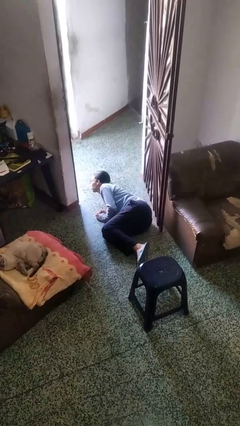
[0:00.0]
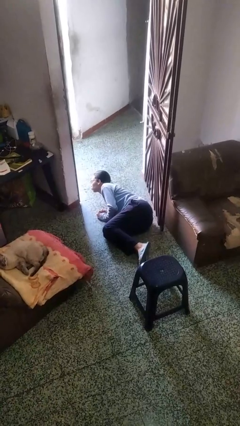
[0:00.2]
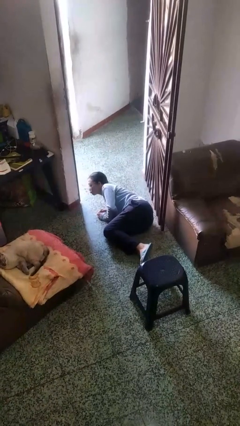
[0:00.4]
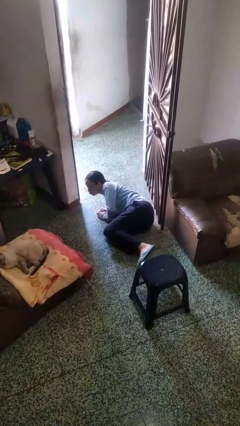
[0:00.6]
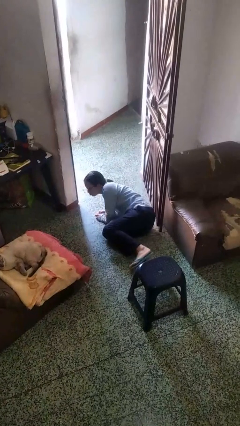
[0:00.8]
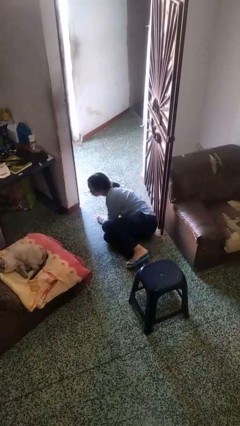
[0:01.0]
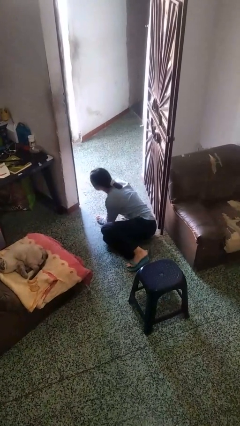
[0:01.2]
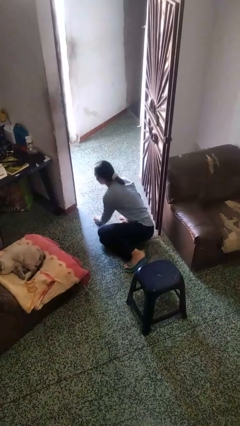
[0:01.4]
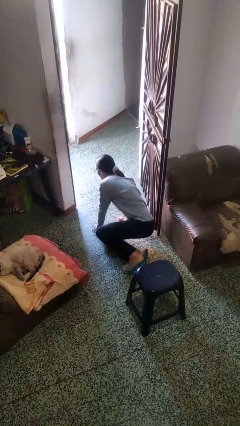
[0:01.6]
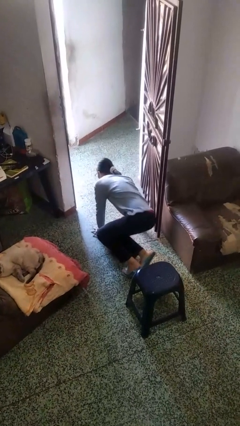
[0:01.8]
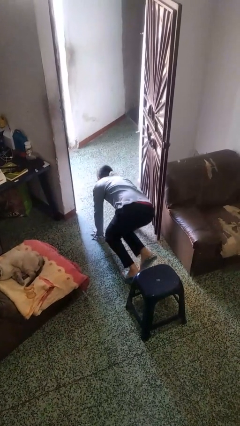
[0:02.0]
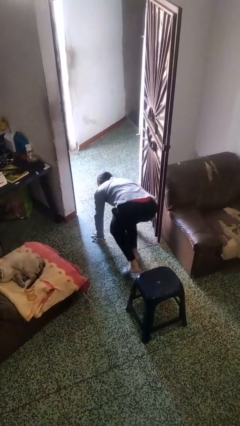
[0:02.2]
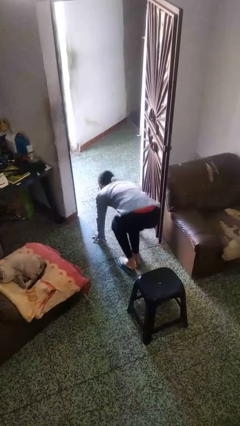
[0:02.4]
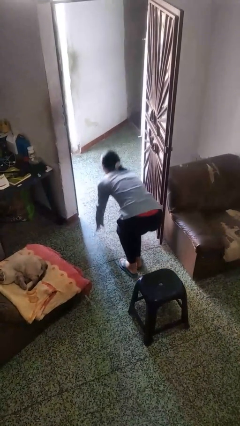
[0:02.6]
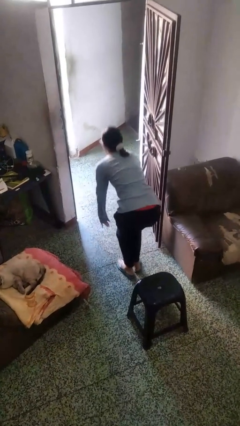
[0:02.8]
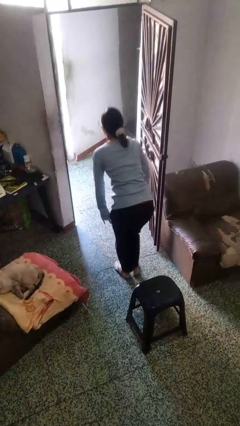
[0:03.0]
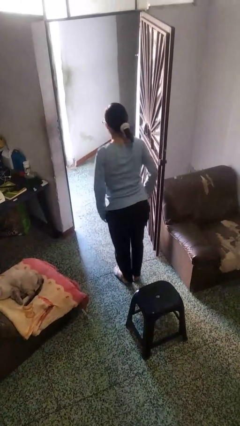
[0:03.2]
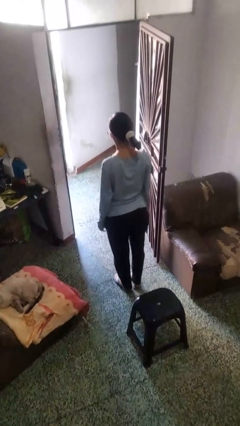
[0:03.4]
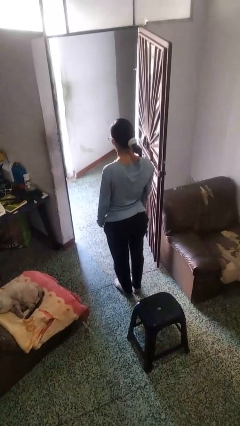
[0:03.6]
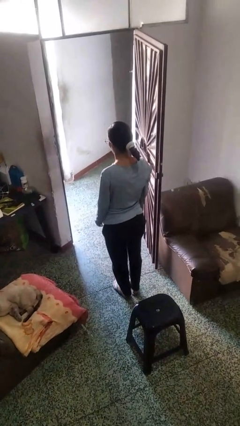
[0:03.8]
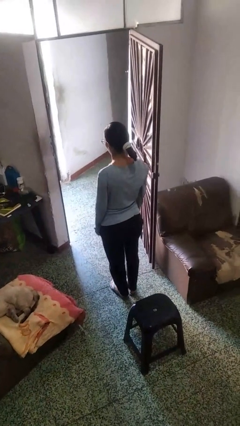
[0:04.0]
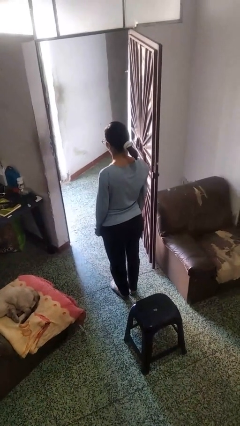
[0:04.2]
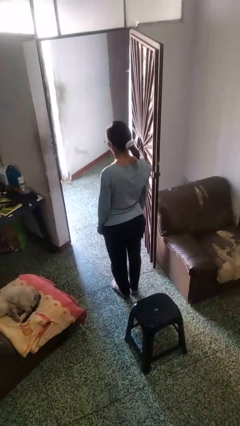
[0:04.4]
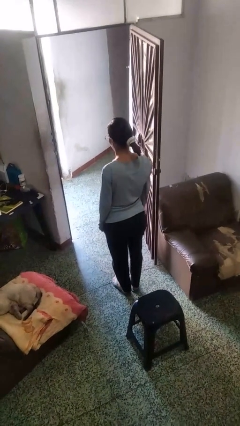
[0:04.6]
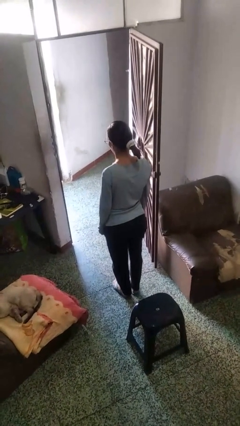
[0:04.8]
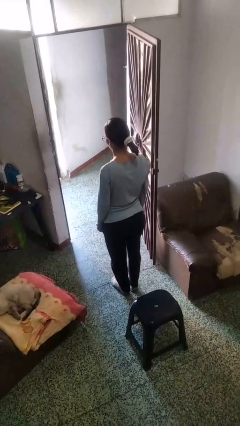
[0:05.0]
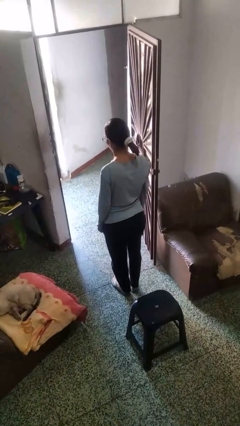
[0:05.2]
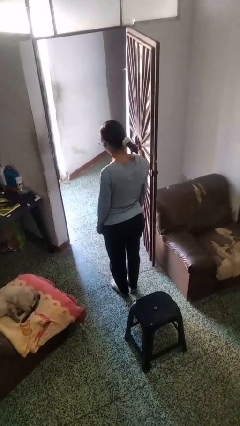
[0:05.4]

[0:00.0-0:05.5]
person stands up from floor

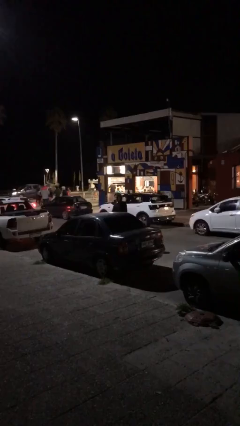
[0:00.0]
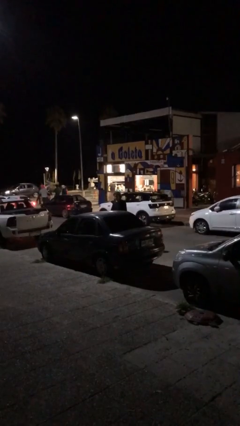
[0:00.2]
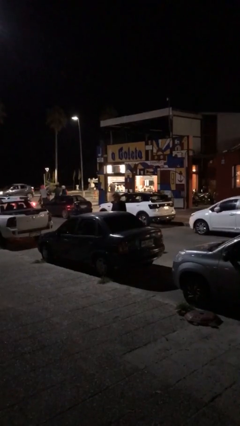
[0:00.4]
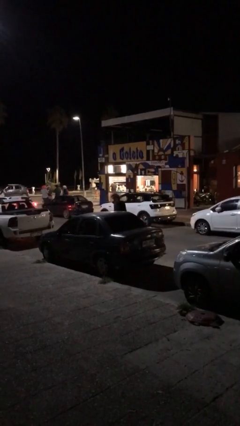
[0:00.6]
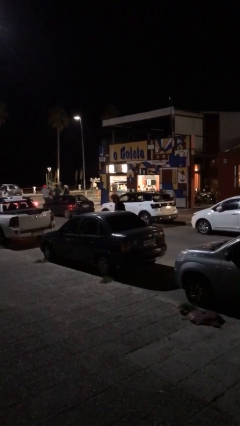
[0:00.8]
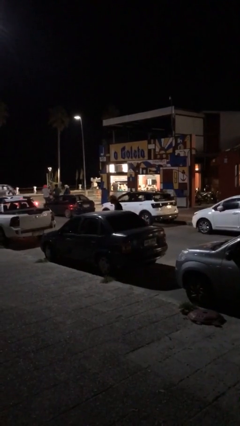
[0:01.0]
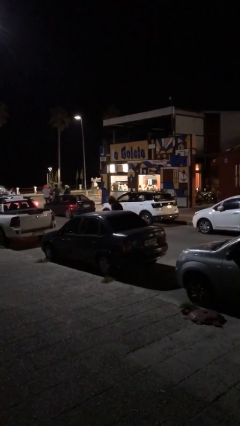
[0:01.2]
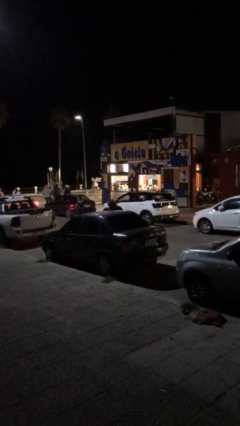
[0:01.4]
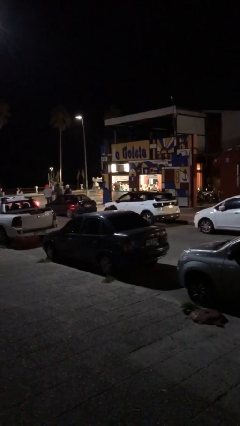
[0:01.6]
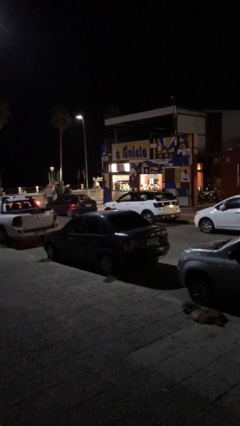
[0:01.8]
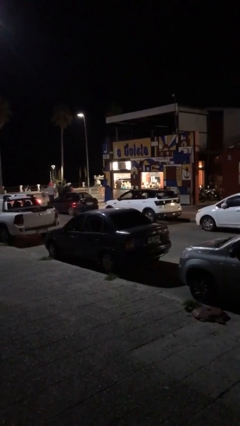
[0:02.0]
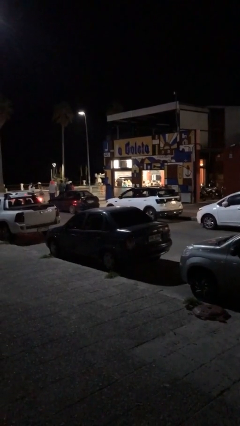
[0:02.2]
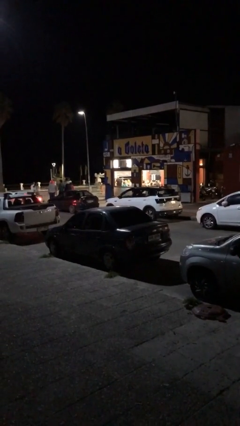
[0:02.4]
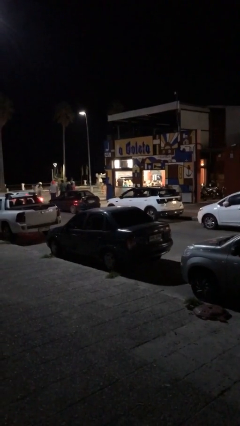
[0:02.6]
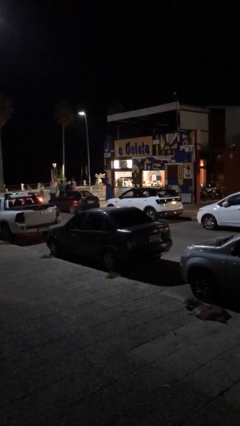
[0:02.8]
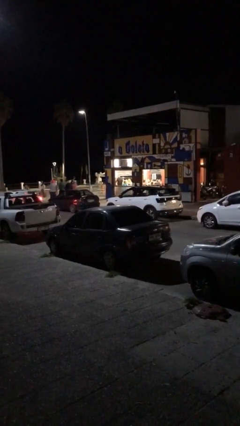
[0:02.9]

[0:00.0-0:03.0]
person enters car

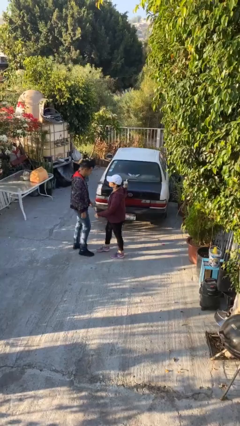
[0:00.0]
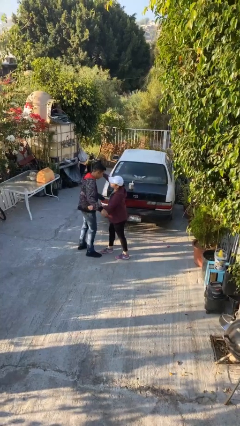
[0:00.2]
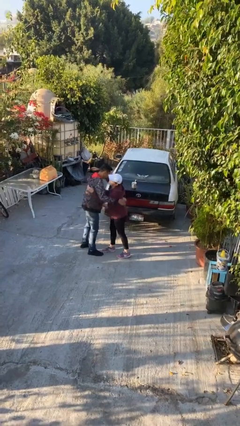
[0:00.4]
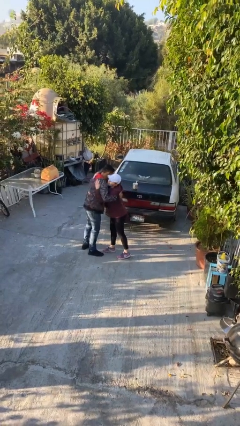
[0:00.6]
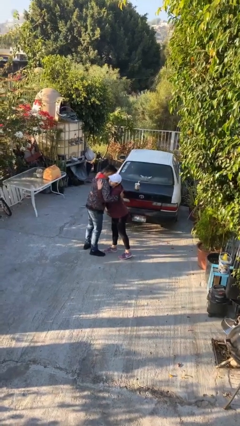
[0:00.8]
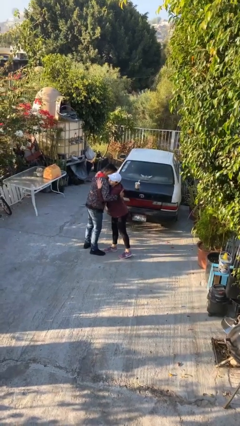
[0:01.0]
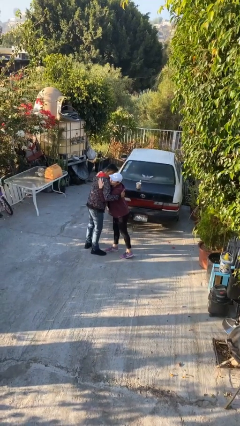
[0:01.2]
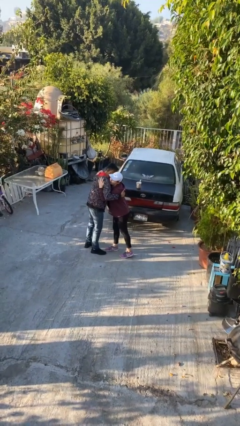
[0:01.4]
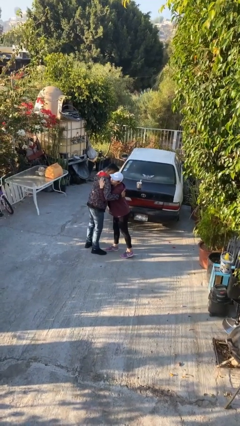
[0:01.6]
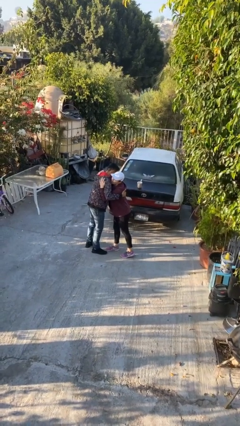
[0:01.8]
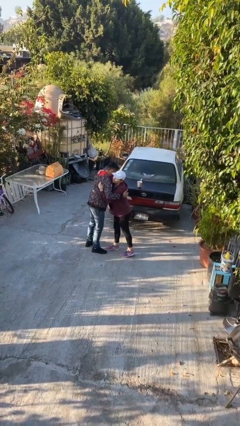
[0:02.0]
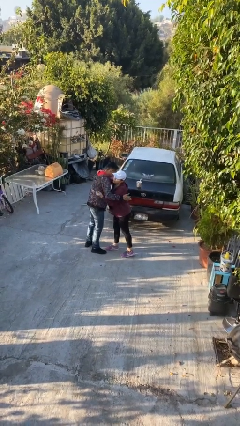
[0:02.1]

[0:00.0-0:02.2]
person embraces person

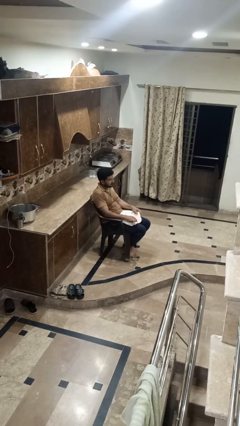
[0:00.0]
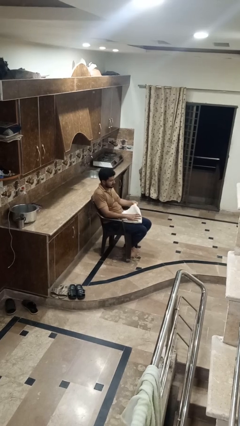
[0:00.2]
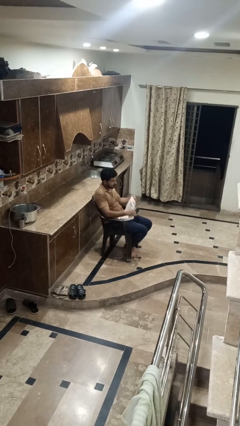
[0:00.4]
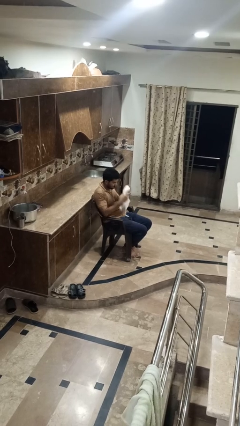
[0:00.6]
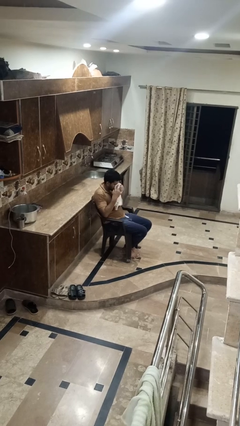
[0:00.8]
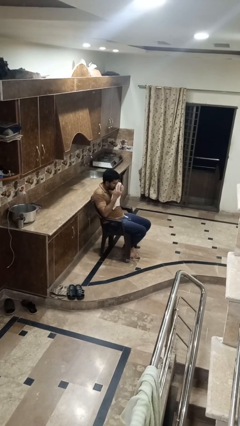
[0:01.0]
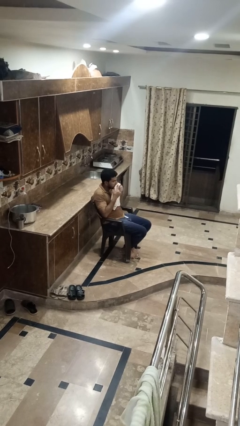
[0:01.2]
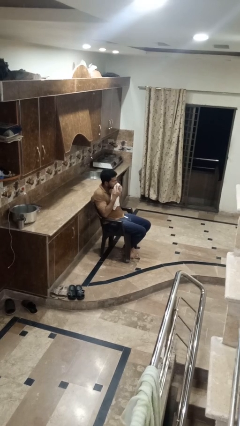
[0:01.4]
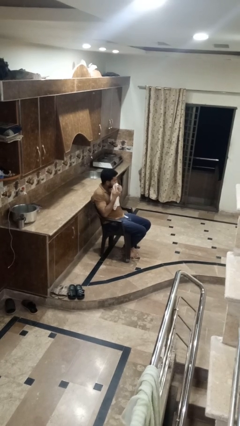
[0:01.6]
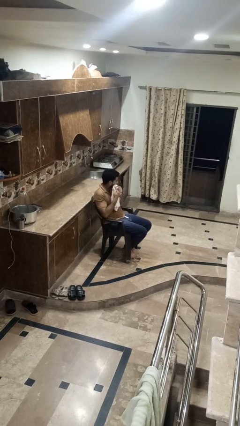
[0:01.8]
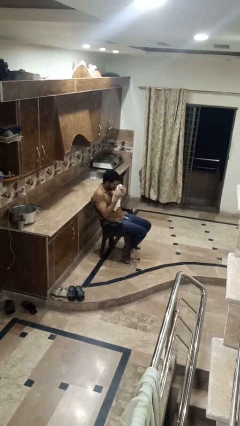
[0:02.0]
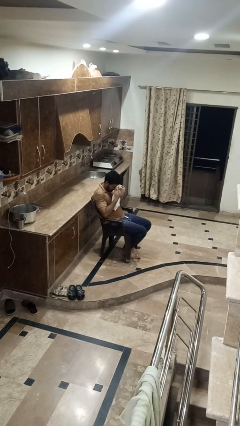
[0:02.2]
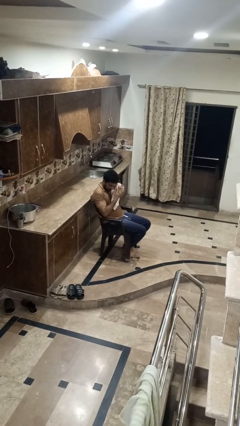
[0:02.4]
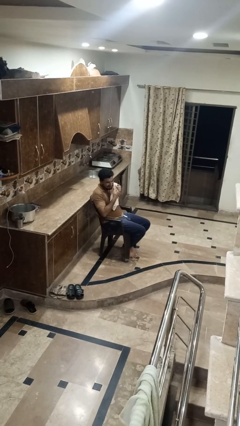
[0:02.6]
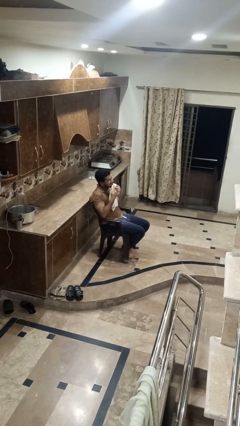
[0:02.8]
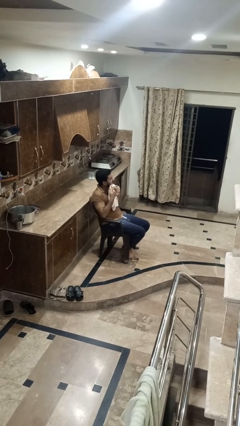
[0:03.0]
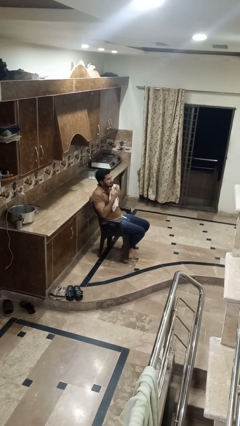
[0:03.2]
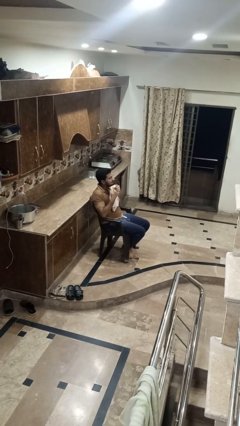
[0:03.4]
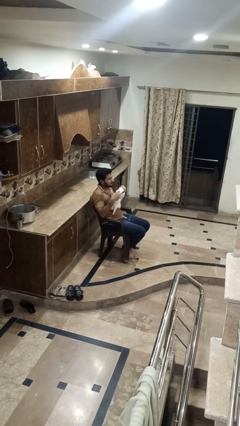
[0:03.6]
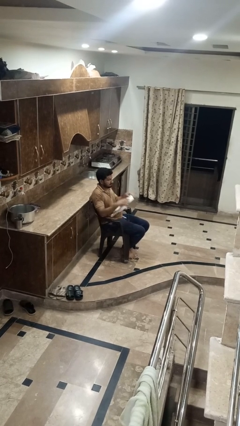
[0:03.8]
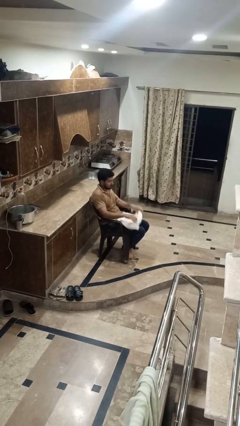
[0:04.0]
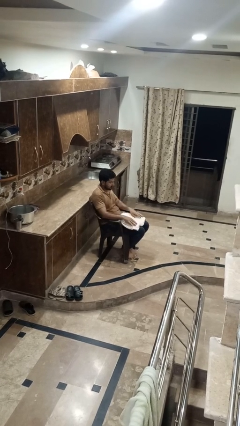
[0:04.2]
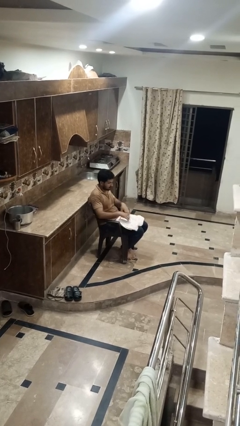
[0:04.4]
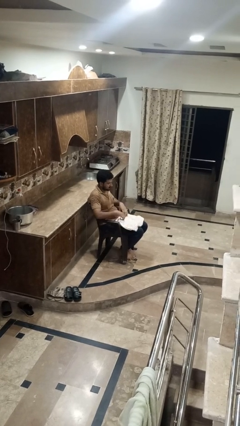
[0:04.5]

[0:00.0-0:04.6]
person wipes mouth with napkin

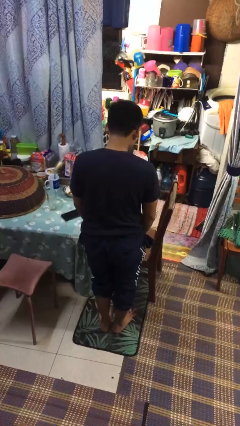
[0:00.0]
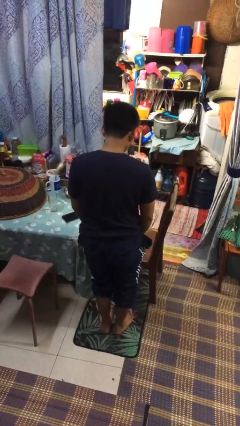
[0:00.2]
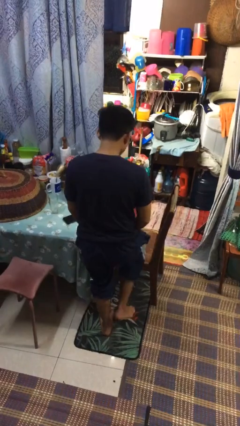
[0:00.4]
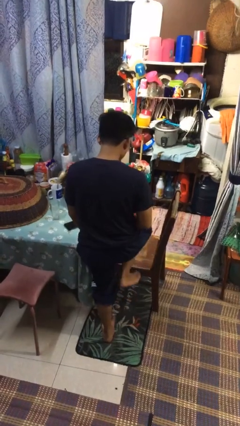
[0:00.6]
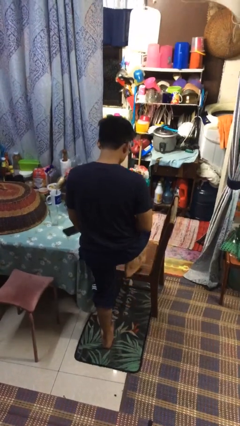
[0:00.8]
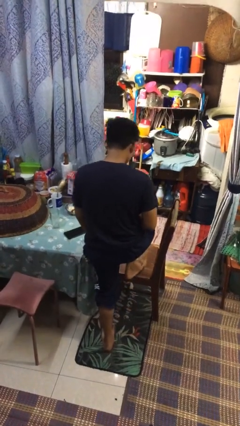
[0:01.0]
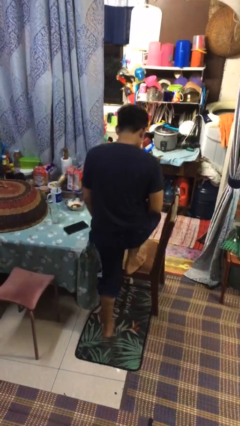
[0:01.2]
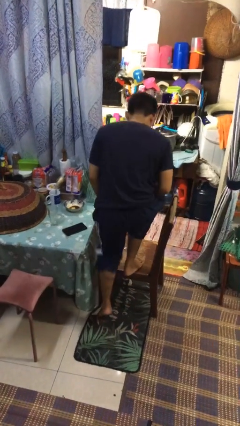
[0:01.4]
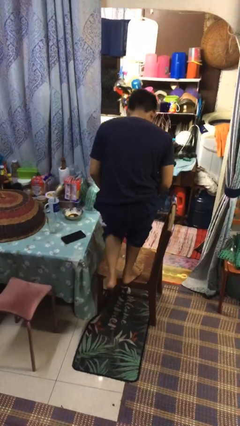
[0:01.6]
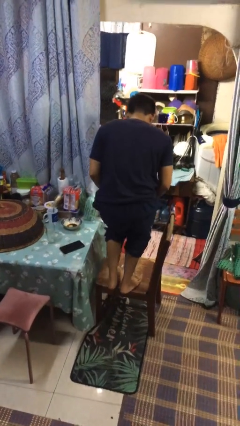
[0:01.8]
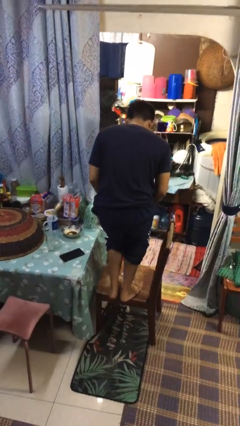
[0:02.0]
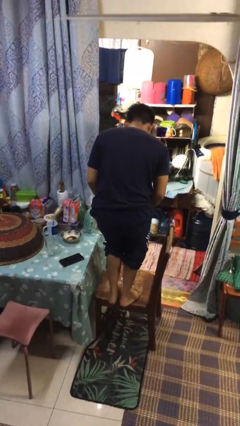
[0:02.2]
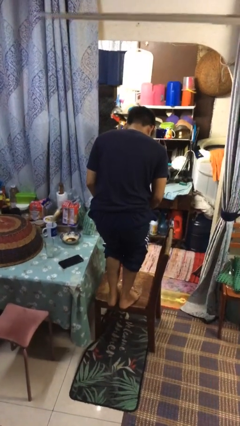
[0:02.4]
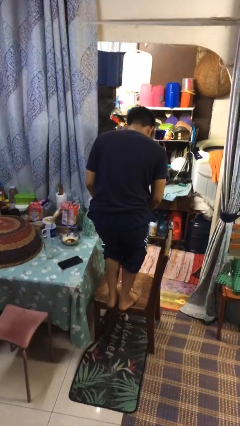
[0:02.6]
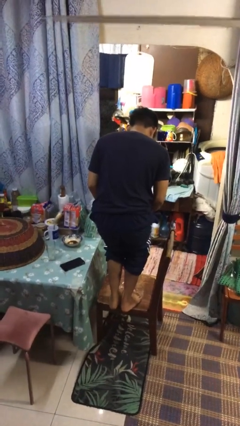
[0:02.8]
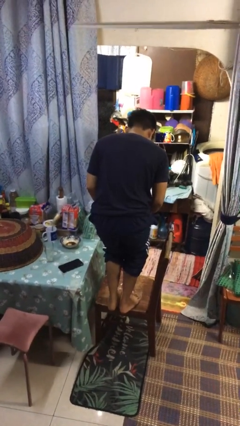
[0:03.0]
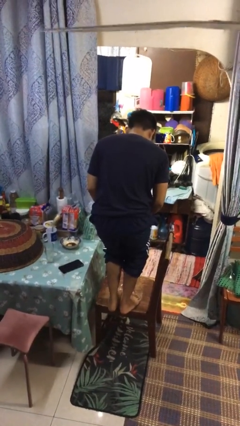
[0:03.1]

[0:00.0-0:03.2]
person climbs on chair
